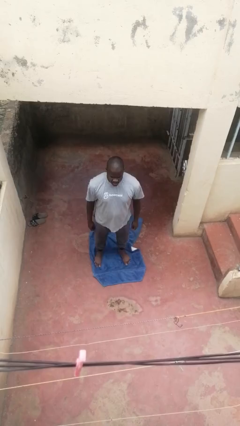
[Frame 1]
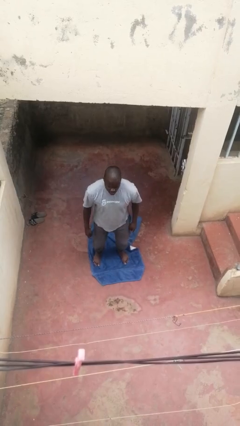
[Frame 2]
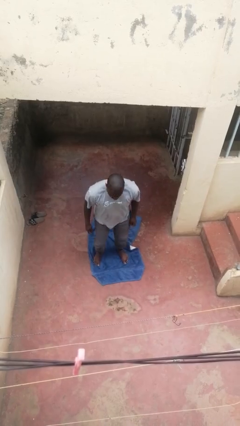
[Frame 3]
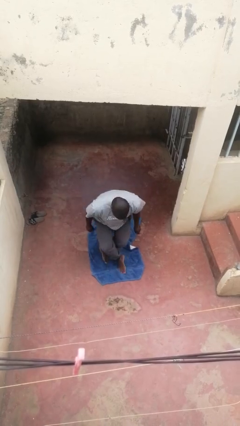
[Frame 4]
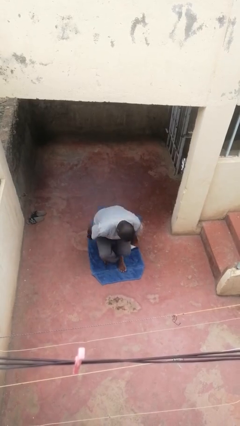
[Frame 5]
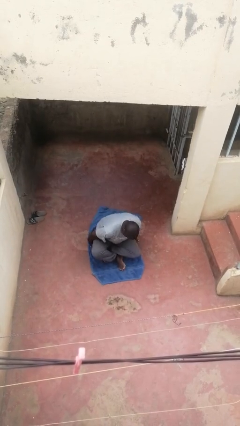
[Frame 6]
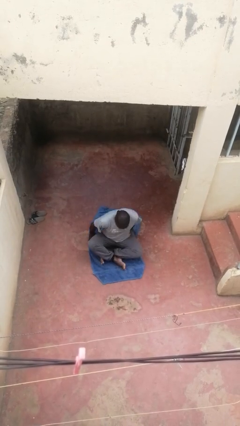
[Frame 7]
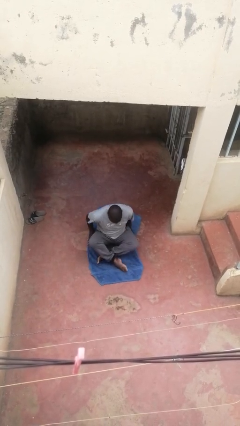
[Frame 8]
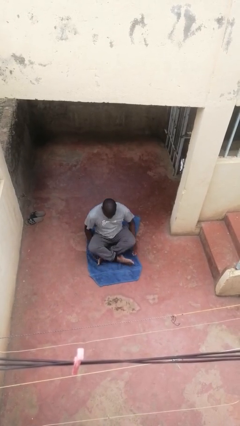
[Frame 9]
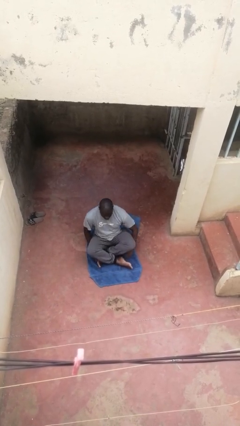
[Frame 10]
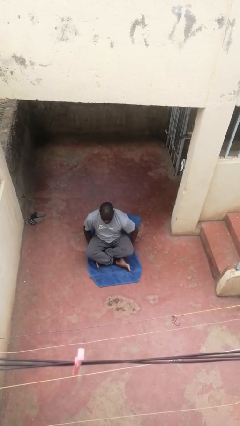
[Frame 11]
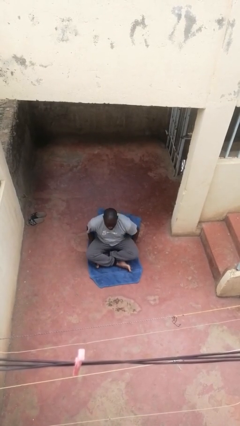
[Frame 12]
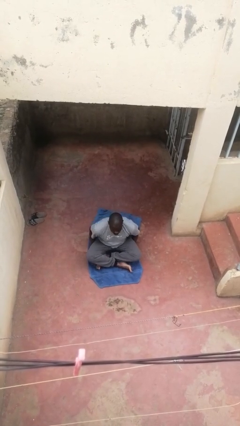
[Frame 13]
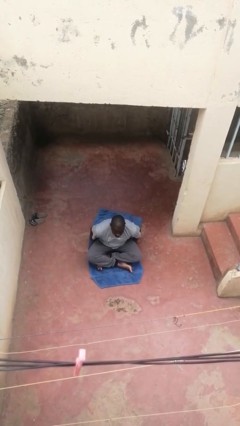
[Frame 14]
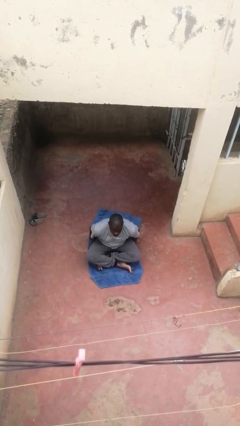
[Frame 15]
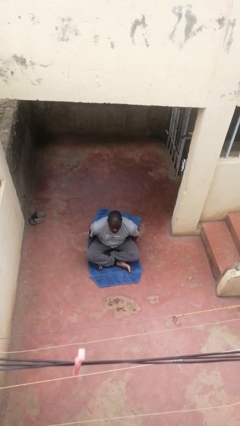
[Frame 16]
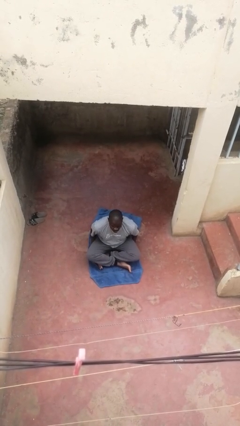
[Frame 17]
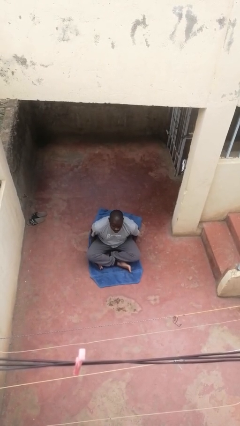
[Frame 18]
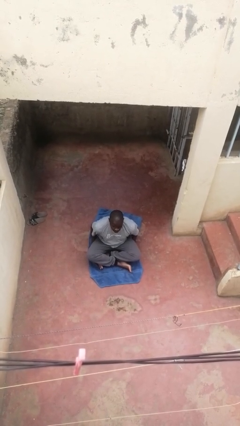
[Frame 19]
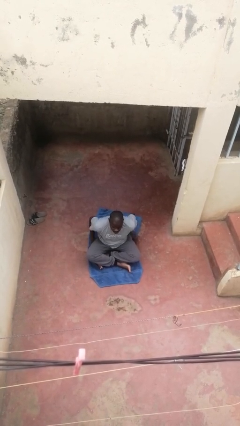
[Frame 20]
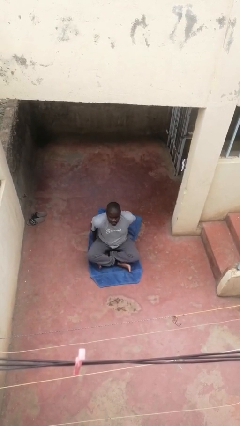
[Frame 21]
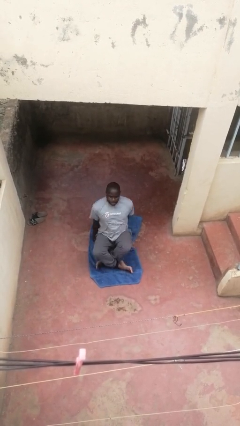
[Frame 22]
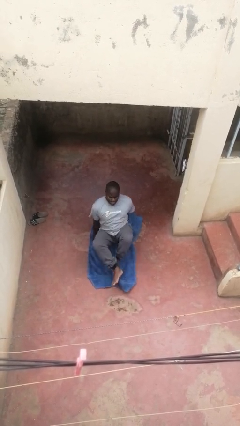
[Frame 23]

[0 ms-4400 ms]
person sits crisscross

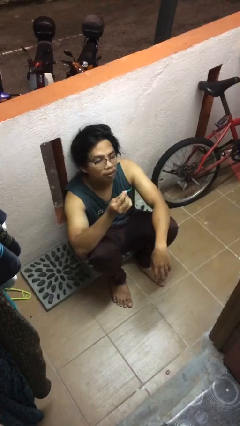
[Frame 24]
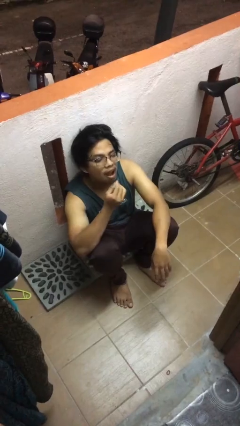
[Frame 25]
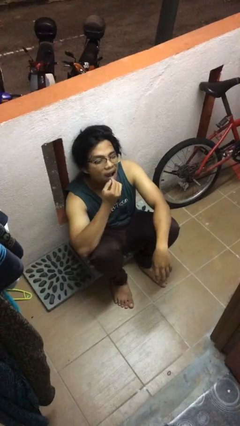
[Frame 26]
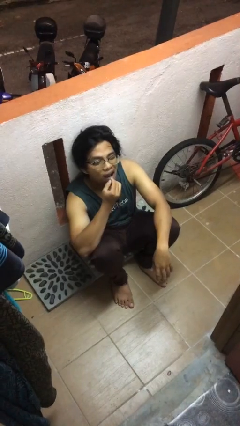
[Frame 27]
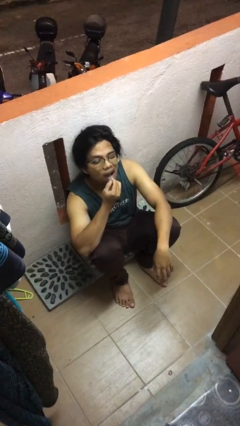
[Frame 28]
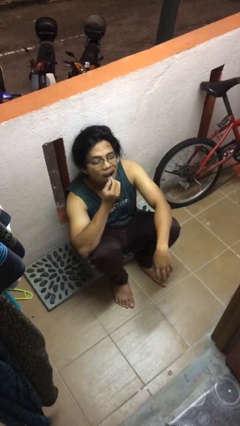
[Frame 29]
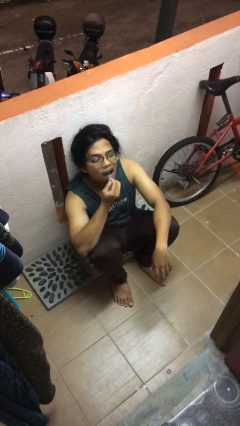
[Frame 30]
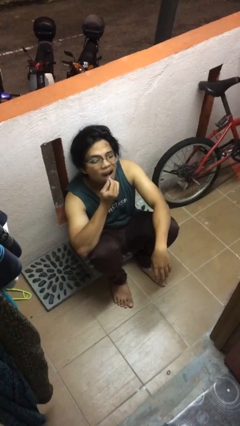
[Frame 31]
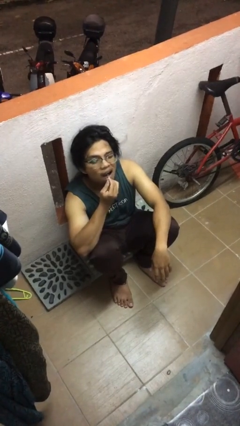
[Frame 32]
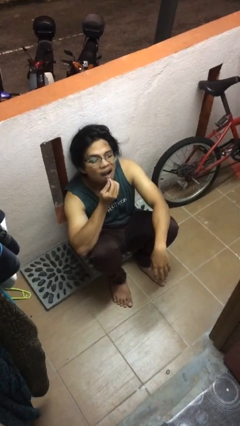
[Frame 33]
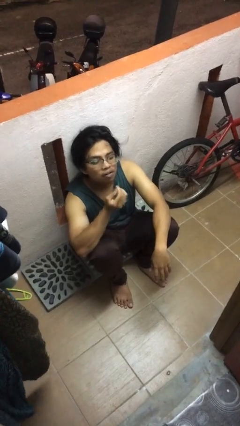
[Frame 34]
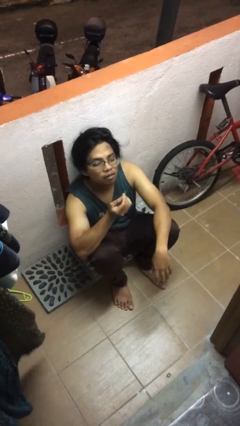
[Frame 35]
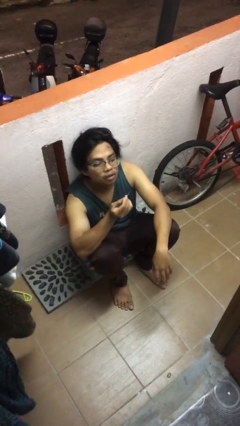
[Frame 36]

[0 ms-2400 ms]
person flosses

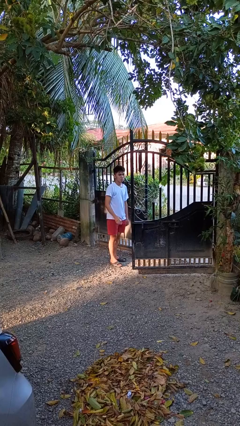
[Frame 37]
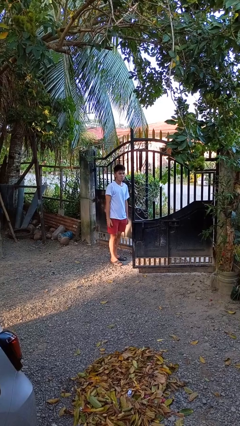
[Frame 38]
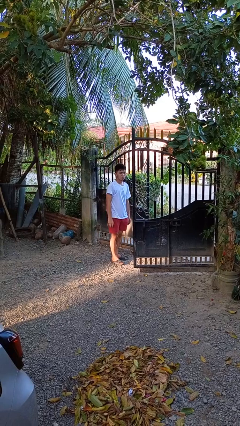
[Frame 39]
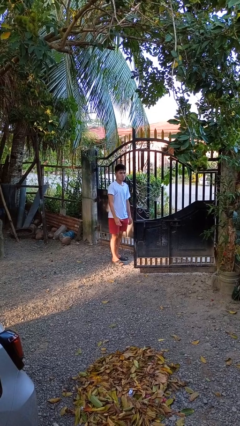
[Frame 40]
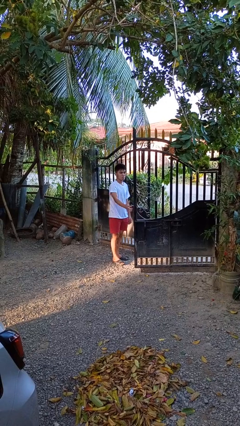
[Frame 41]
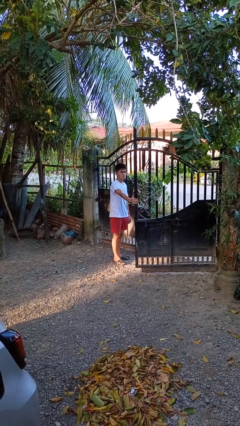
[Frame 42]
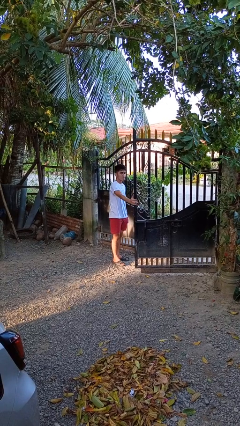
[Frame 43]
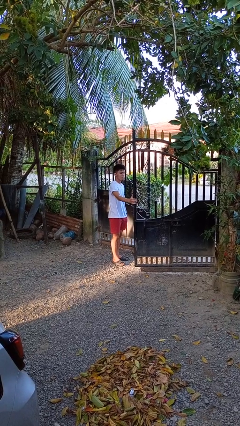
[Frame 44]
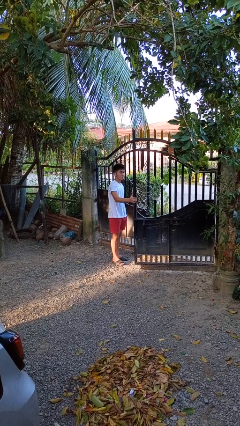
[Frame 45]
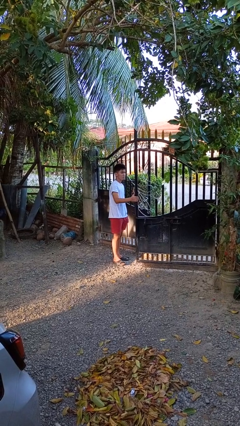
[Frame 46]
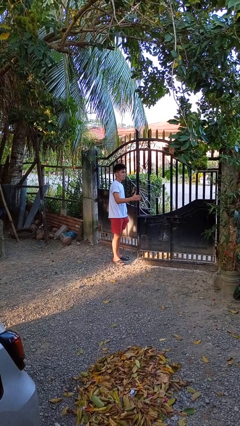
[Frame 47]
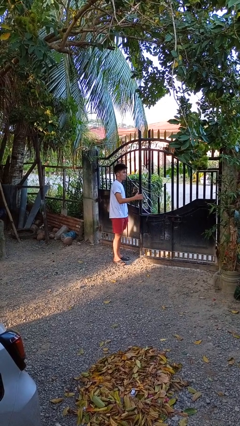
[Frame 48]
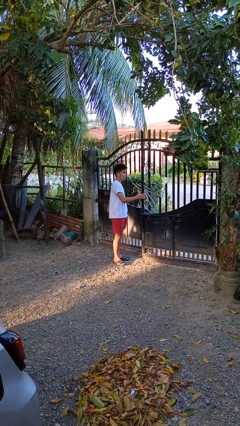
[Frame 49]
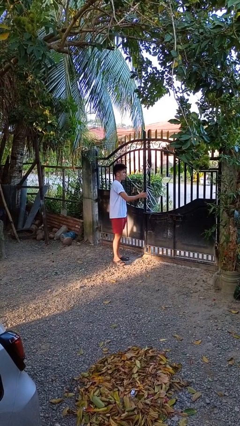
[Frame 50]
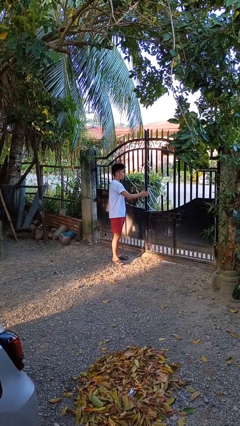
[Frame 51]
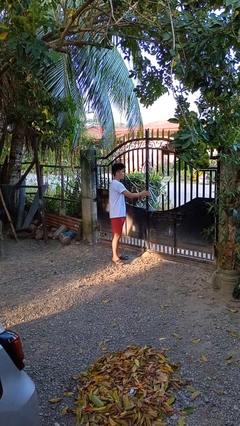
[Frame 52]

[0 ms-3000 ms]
person closes gate

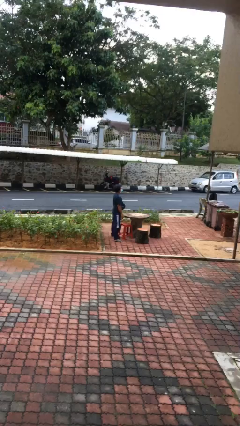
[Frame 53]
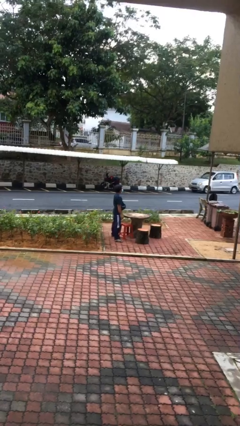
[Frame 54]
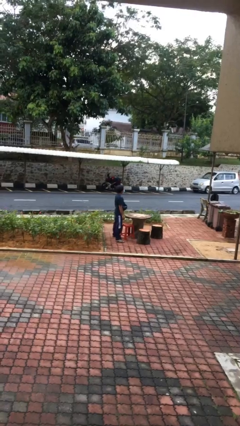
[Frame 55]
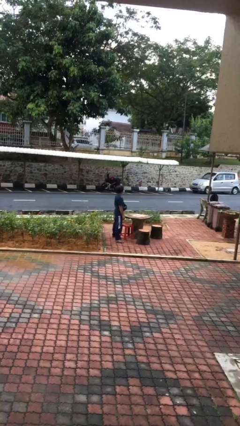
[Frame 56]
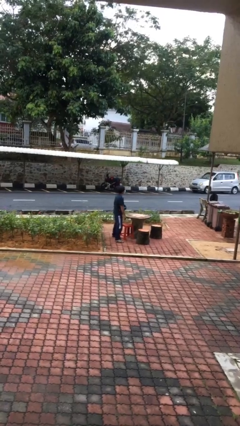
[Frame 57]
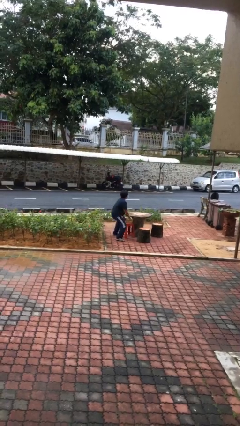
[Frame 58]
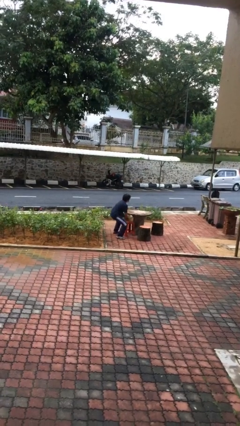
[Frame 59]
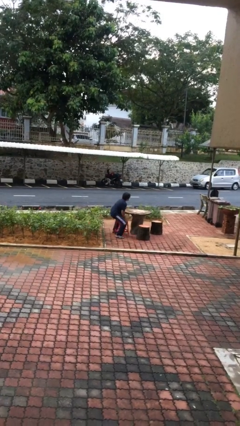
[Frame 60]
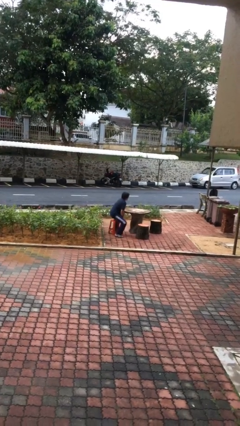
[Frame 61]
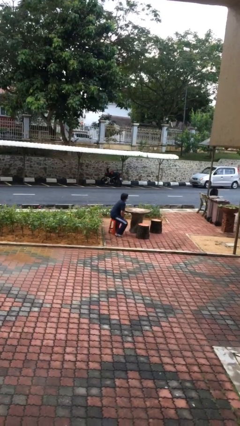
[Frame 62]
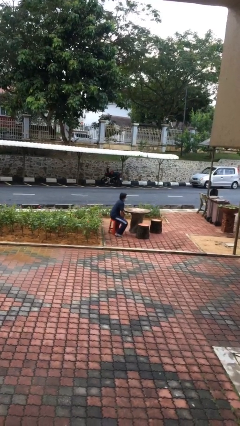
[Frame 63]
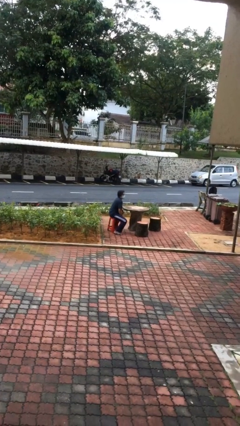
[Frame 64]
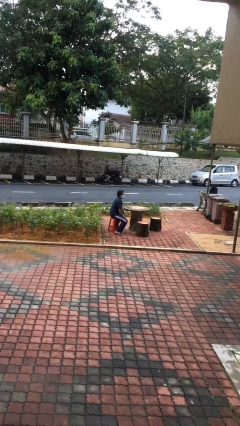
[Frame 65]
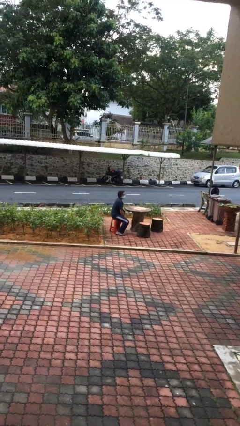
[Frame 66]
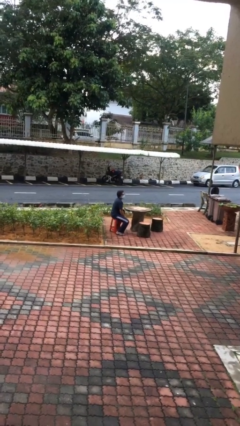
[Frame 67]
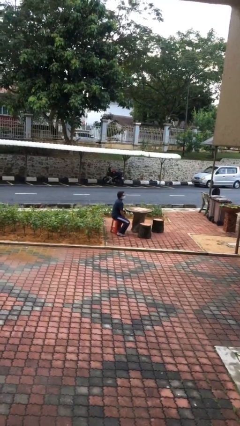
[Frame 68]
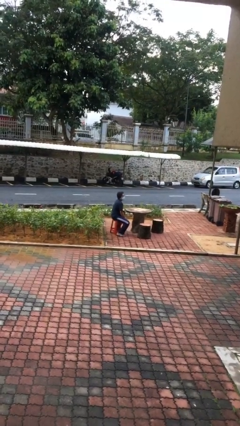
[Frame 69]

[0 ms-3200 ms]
person sits down

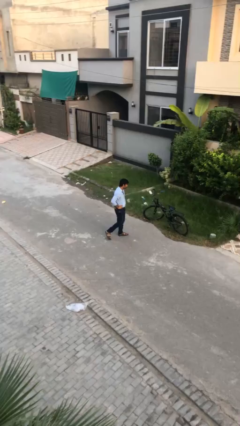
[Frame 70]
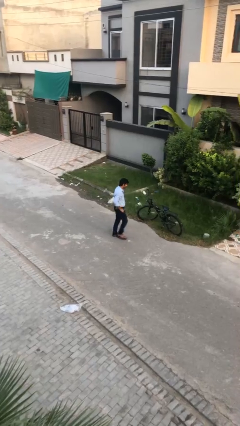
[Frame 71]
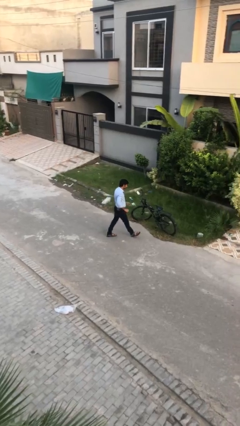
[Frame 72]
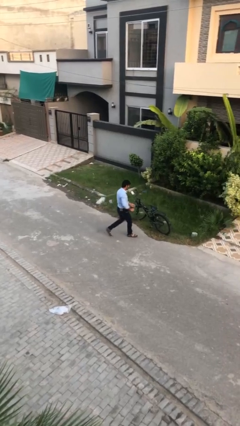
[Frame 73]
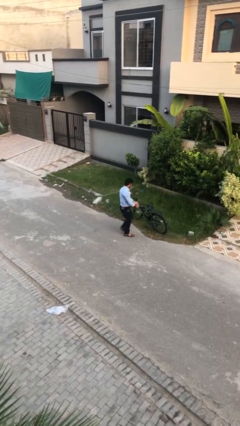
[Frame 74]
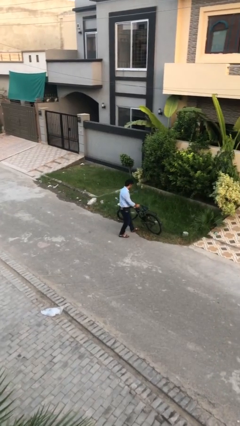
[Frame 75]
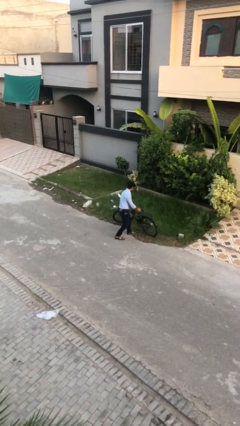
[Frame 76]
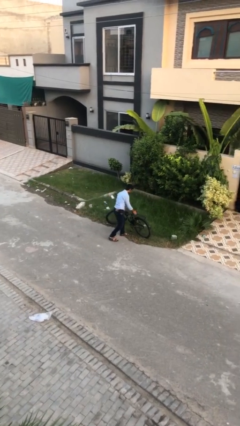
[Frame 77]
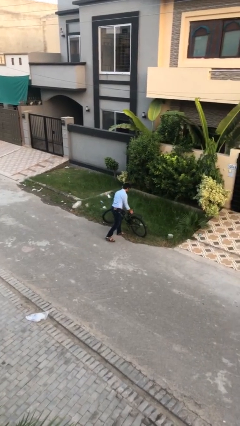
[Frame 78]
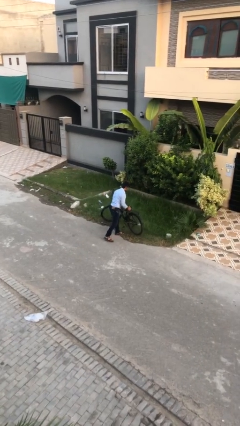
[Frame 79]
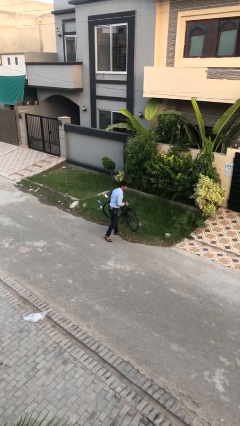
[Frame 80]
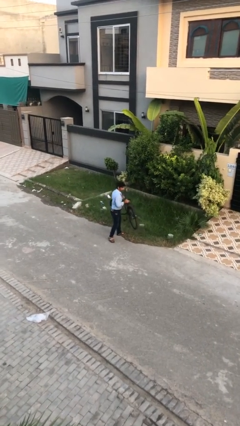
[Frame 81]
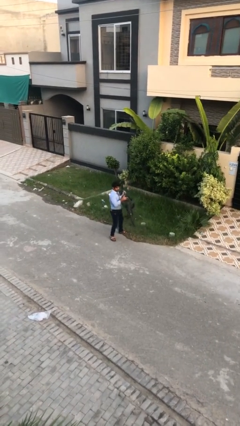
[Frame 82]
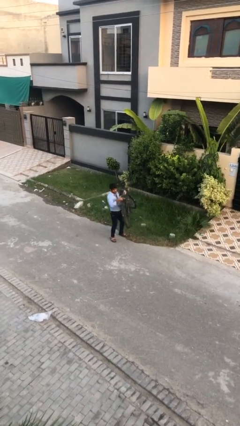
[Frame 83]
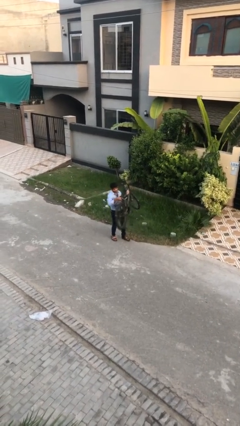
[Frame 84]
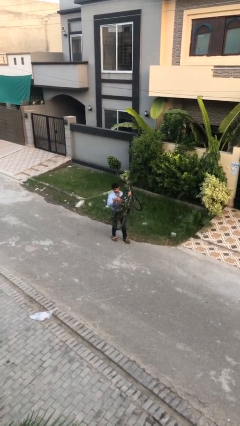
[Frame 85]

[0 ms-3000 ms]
person picks up object from floor

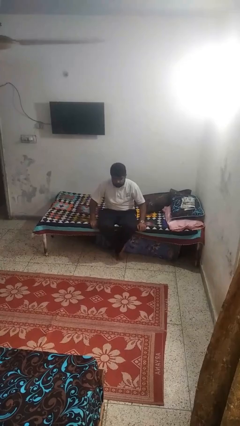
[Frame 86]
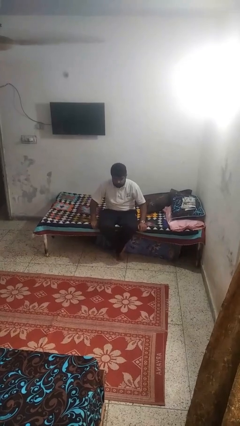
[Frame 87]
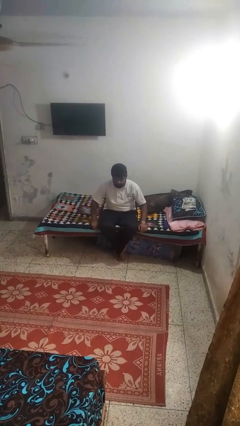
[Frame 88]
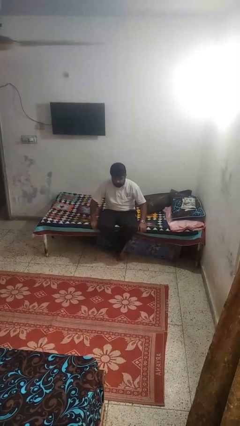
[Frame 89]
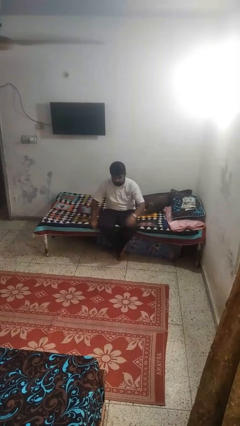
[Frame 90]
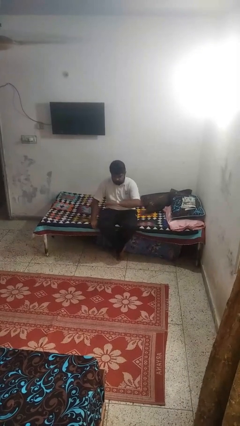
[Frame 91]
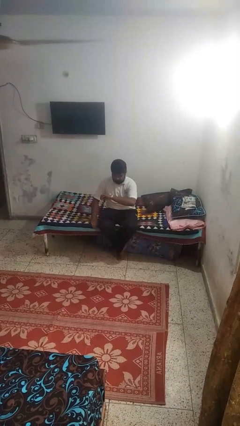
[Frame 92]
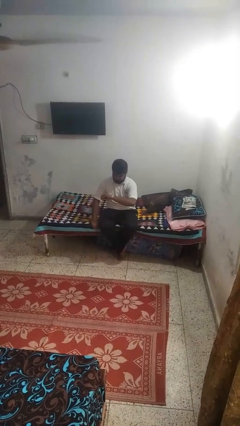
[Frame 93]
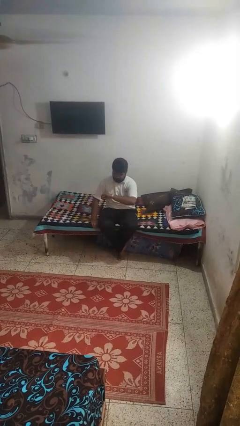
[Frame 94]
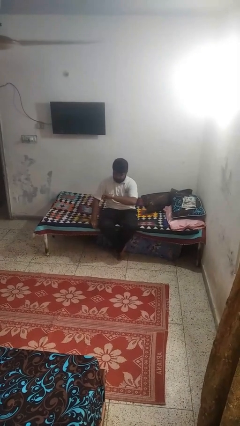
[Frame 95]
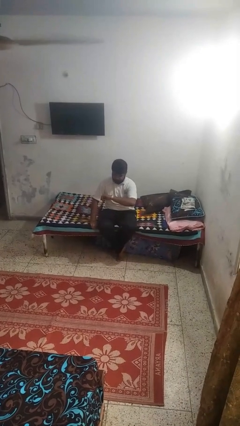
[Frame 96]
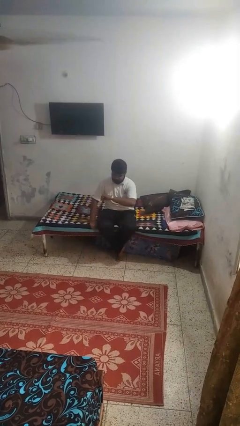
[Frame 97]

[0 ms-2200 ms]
person looks at wristwatch
